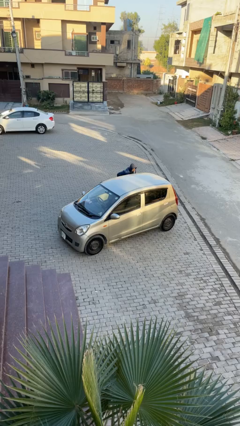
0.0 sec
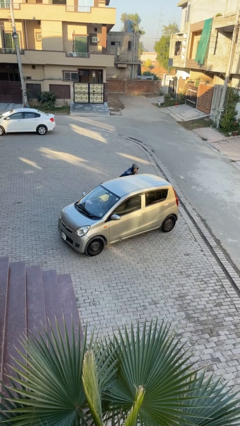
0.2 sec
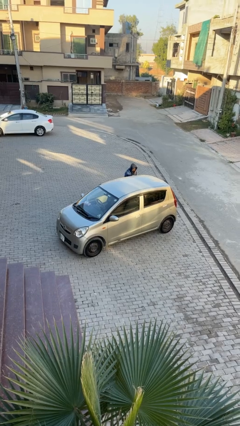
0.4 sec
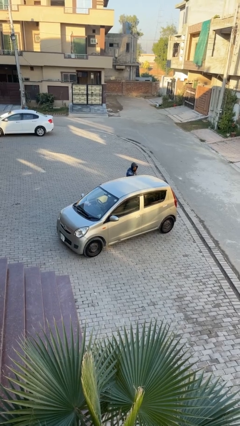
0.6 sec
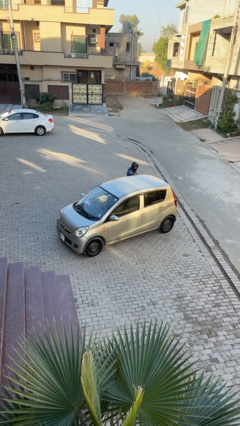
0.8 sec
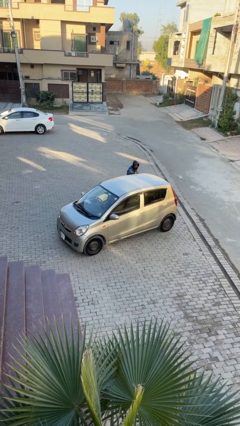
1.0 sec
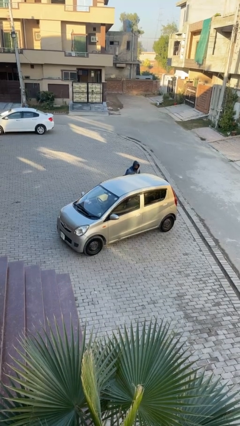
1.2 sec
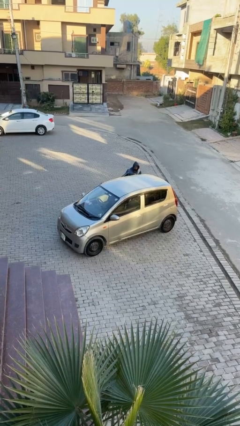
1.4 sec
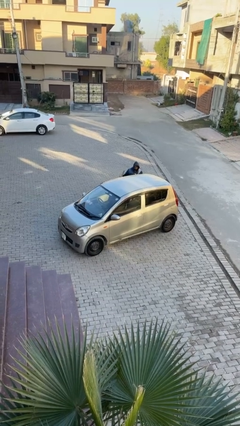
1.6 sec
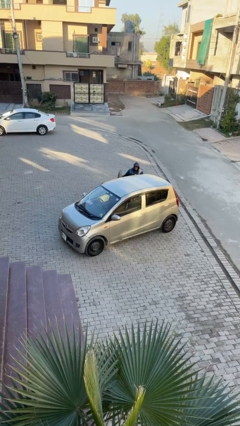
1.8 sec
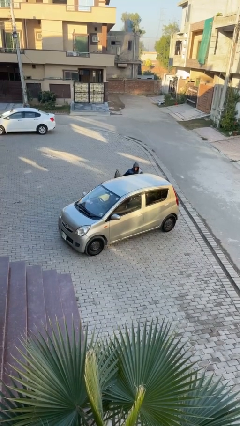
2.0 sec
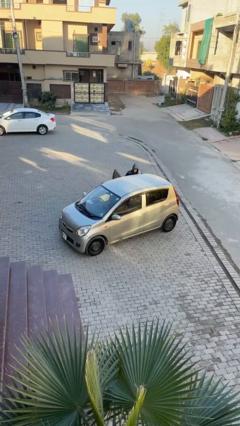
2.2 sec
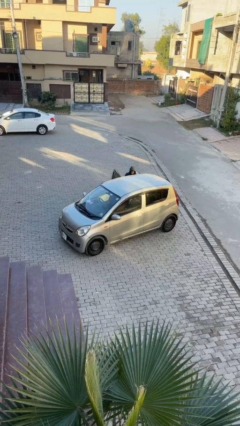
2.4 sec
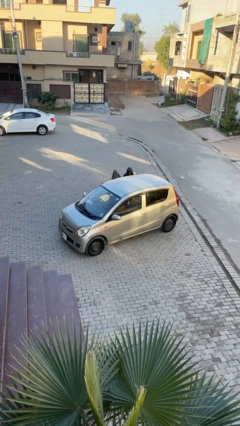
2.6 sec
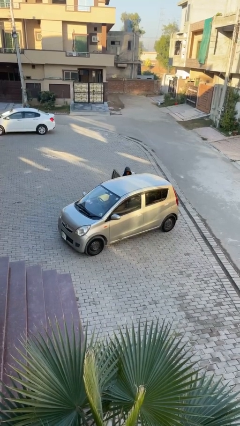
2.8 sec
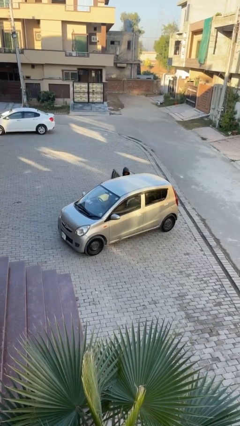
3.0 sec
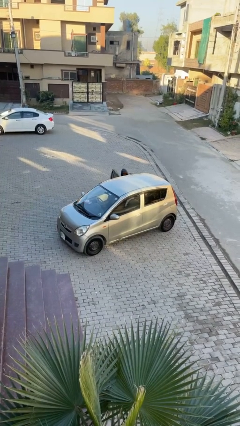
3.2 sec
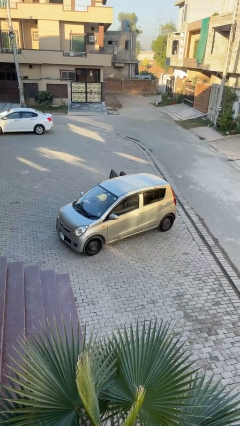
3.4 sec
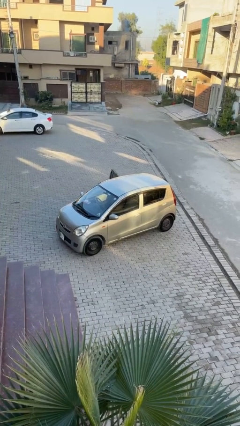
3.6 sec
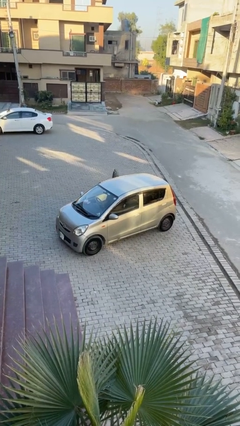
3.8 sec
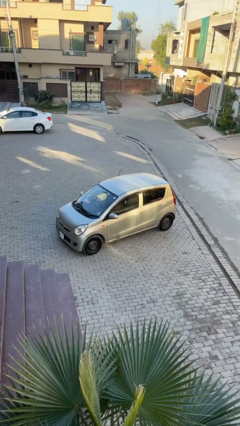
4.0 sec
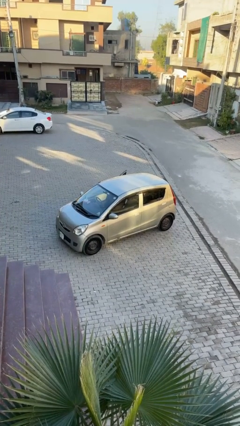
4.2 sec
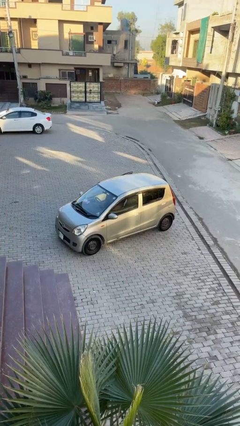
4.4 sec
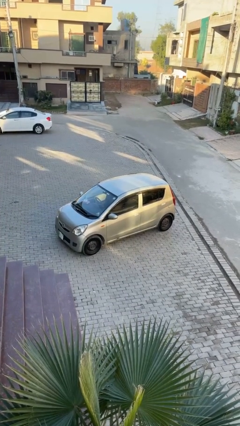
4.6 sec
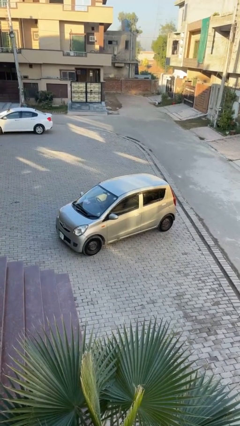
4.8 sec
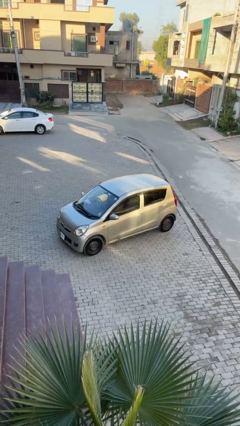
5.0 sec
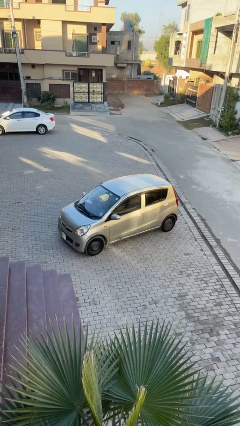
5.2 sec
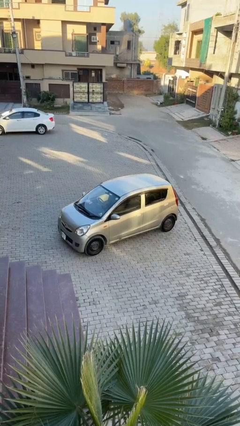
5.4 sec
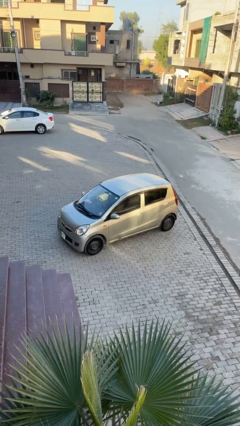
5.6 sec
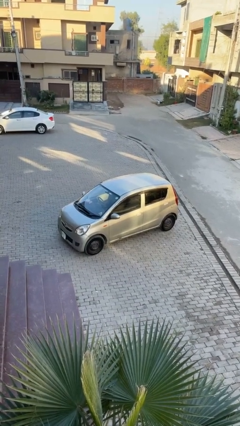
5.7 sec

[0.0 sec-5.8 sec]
car picks up person

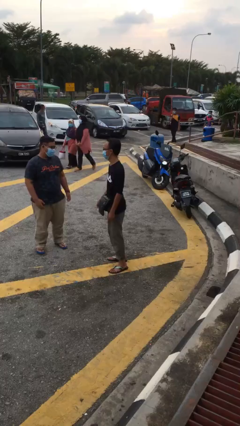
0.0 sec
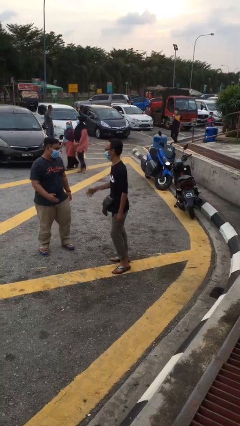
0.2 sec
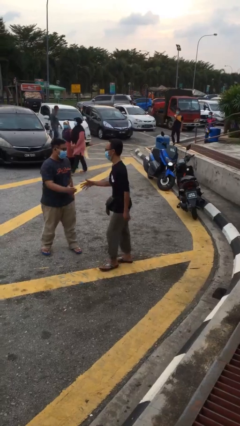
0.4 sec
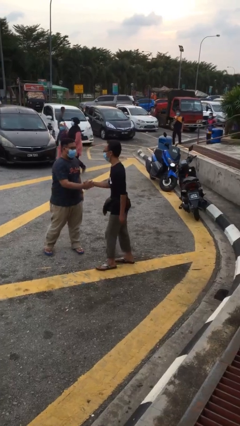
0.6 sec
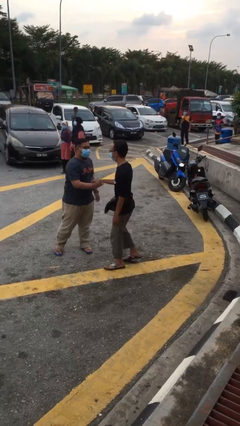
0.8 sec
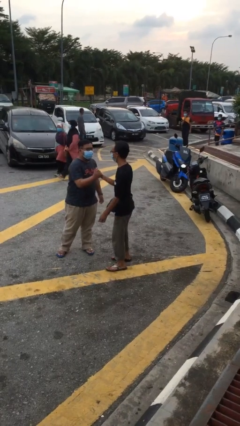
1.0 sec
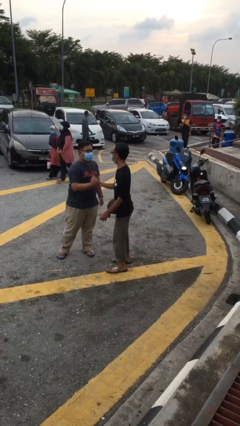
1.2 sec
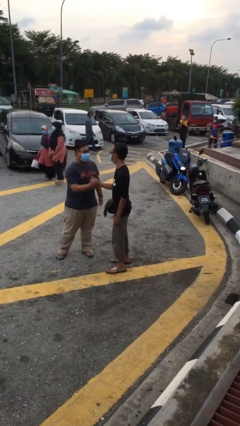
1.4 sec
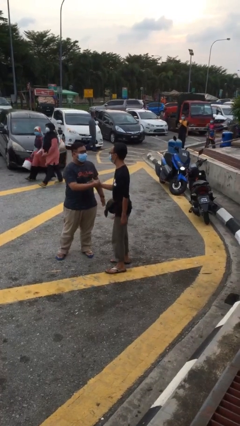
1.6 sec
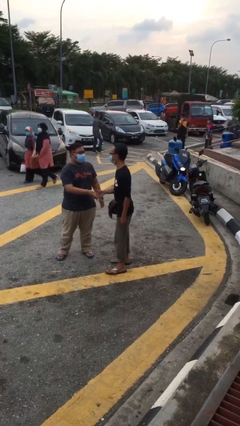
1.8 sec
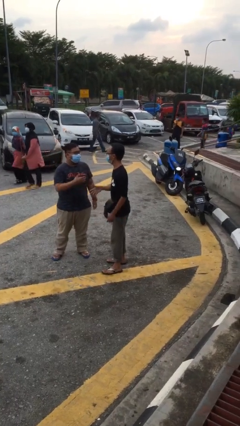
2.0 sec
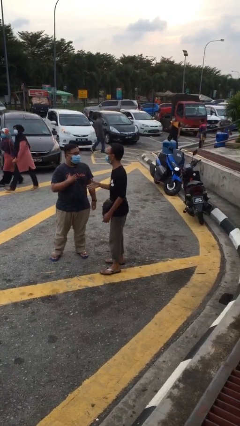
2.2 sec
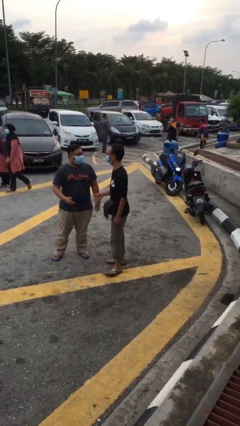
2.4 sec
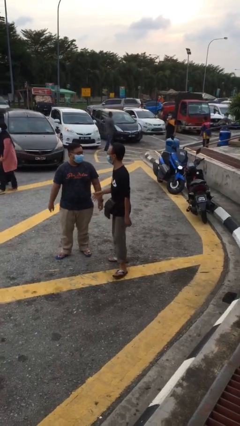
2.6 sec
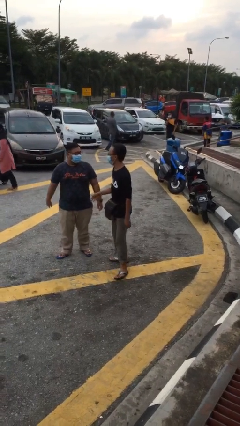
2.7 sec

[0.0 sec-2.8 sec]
person shakes hand

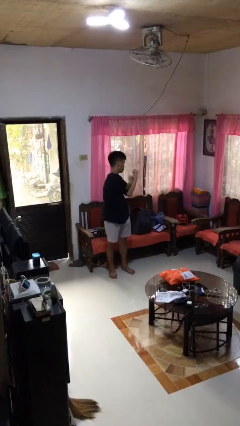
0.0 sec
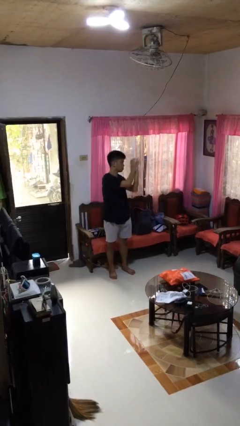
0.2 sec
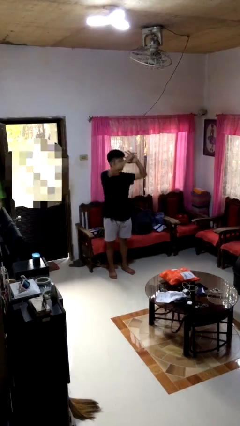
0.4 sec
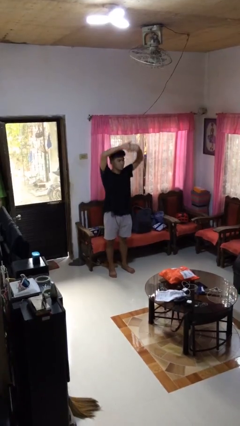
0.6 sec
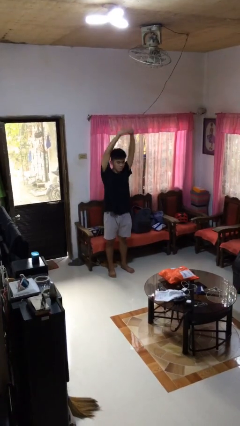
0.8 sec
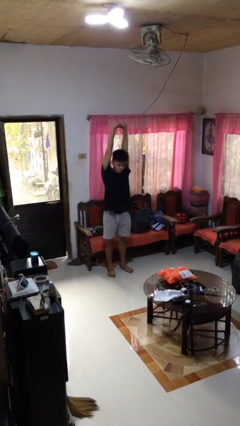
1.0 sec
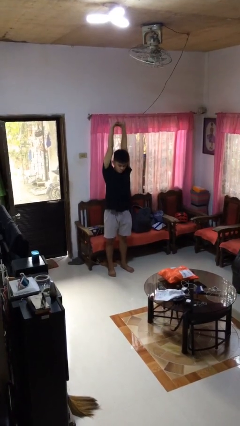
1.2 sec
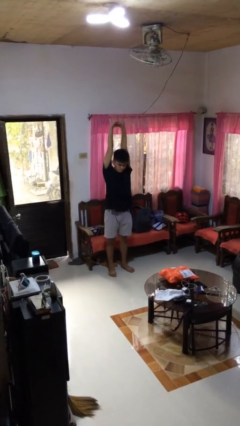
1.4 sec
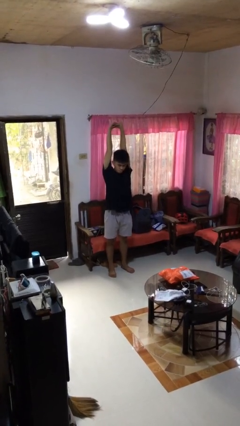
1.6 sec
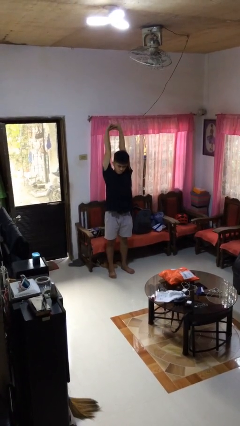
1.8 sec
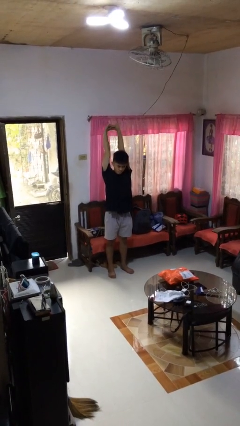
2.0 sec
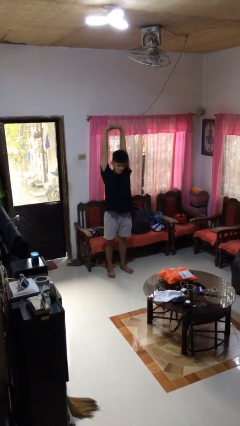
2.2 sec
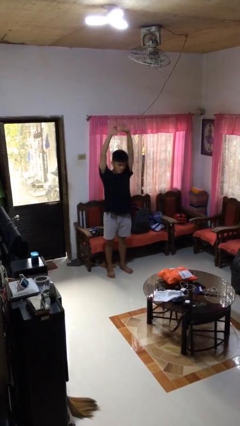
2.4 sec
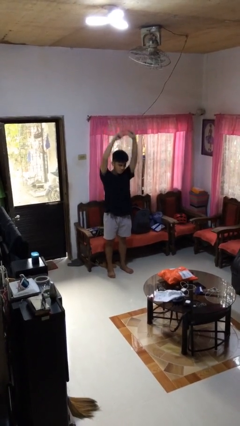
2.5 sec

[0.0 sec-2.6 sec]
person stretches arms over head

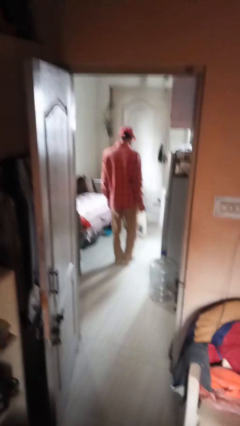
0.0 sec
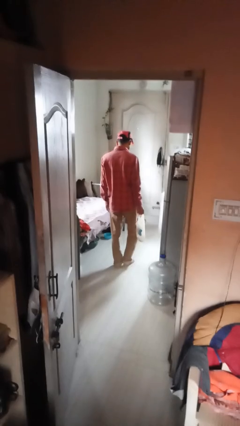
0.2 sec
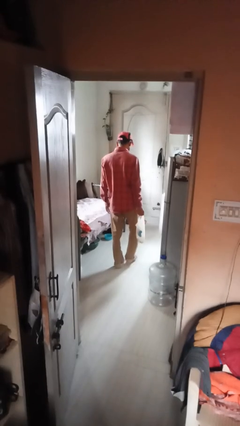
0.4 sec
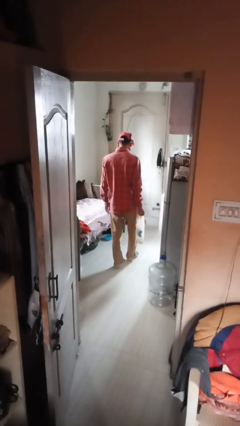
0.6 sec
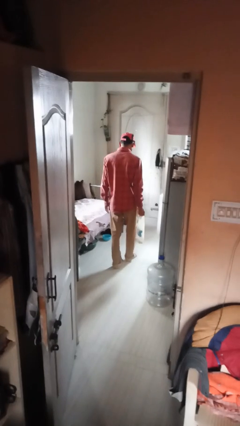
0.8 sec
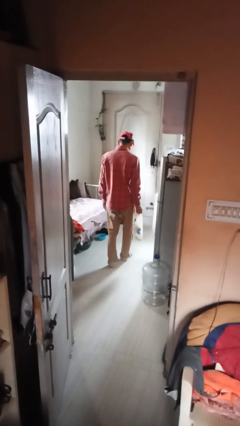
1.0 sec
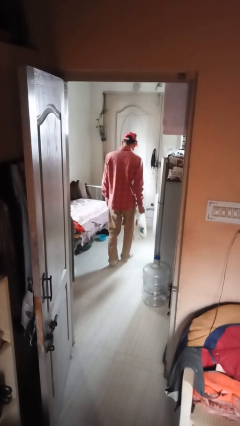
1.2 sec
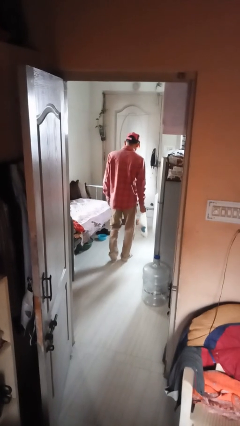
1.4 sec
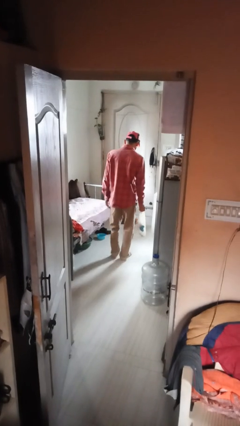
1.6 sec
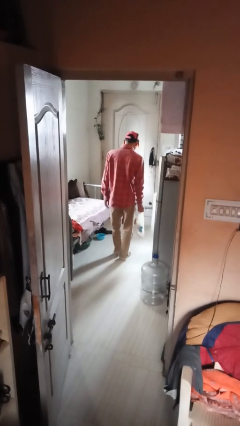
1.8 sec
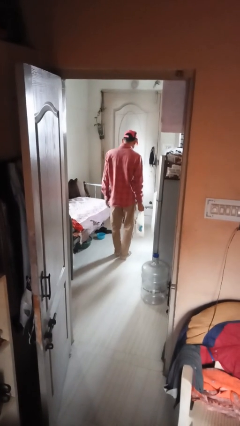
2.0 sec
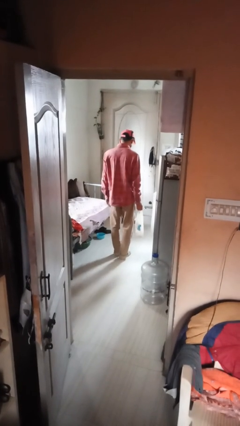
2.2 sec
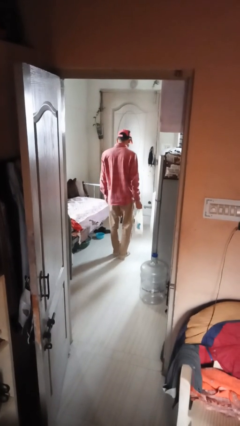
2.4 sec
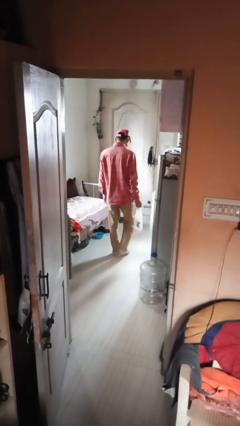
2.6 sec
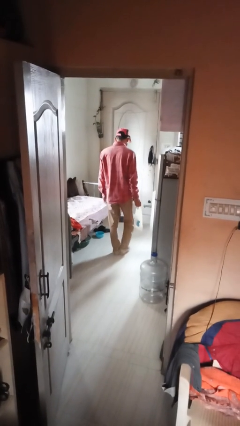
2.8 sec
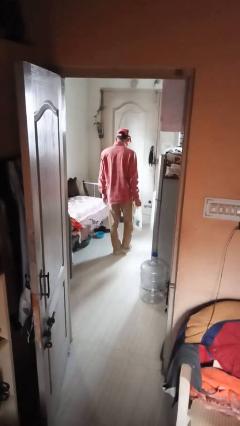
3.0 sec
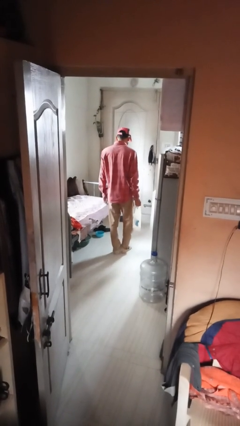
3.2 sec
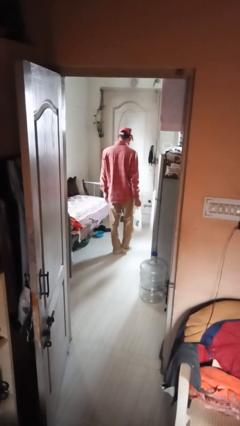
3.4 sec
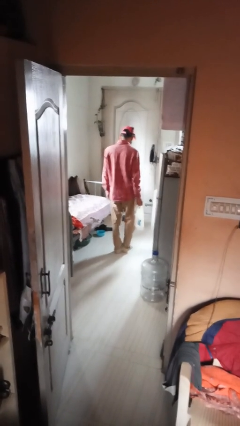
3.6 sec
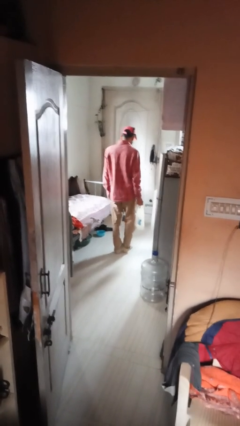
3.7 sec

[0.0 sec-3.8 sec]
person carries groceries

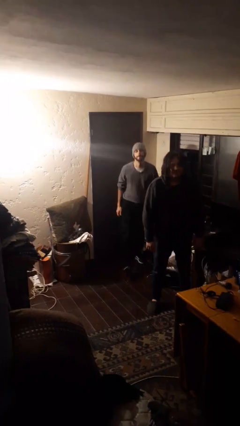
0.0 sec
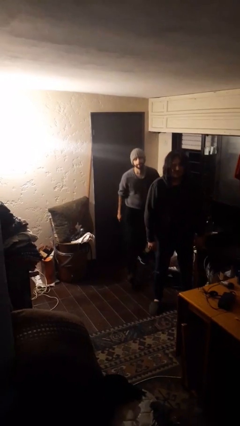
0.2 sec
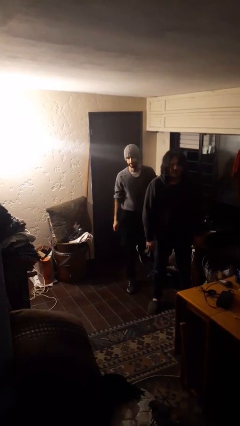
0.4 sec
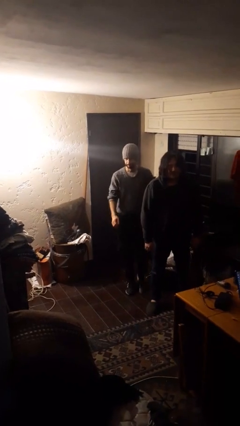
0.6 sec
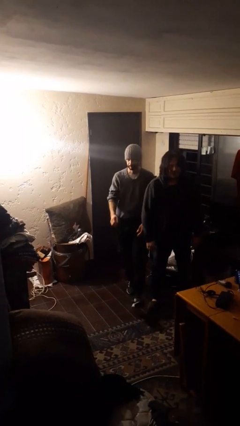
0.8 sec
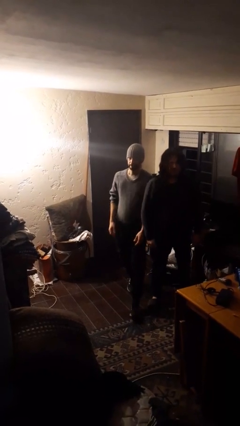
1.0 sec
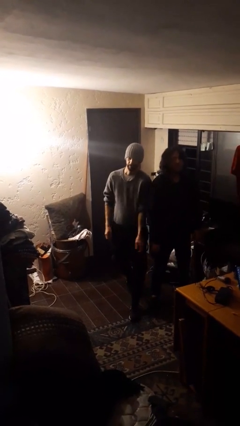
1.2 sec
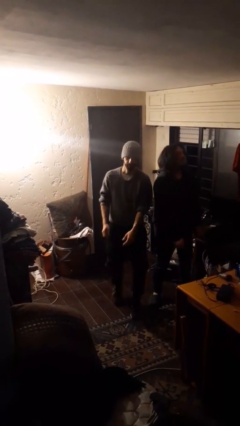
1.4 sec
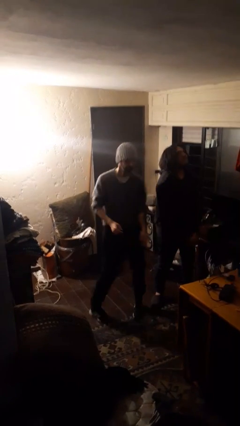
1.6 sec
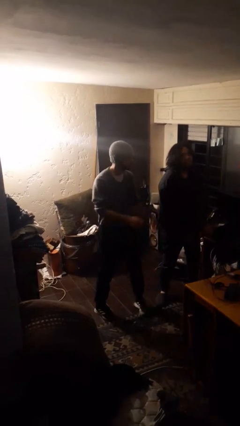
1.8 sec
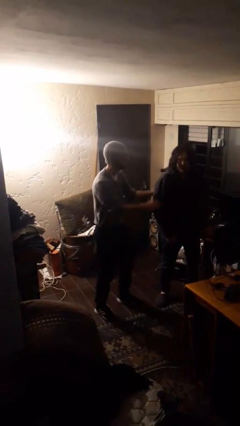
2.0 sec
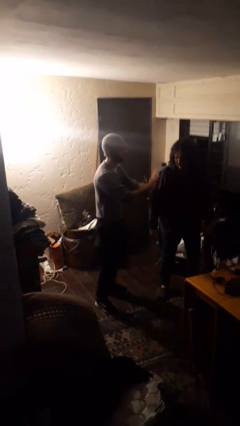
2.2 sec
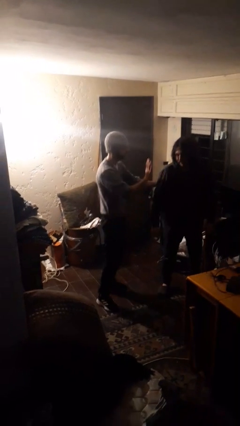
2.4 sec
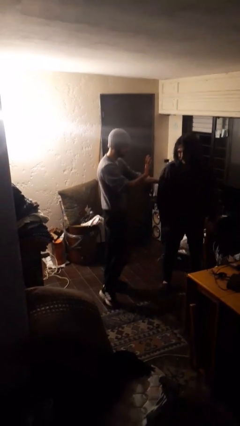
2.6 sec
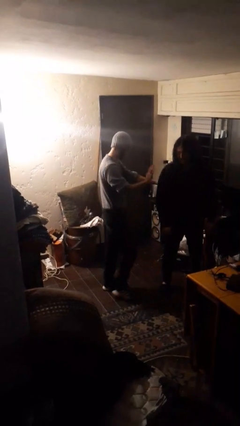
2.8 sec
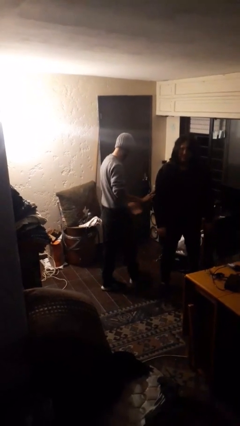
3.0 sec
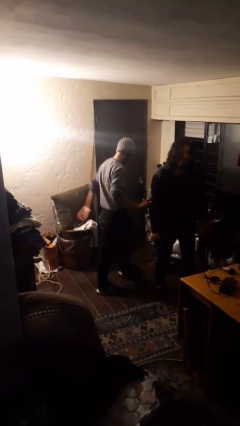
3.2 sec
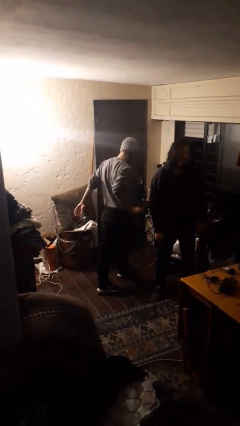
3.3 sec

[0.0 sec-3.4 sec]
person bumps into person
